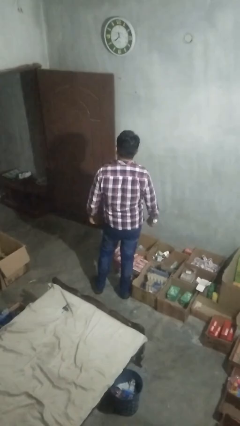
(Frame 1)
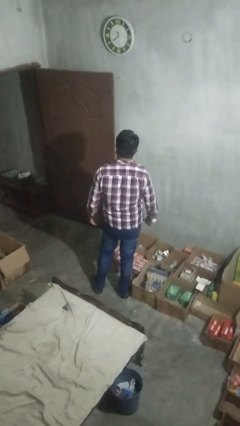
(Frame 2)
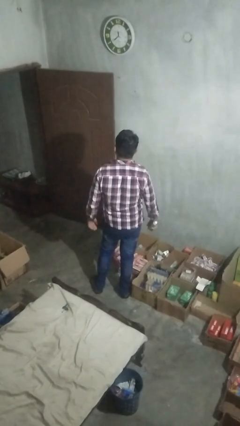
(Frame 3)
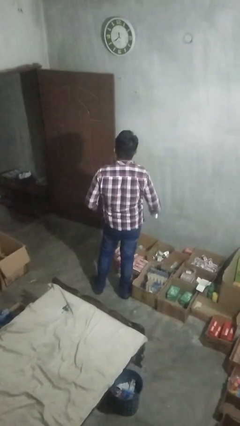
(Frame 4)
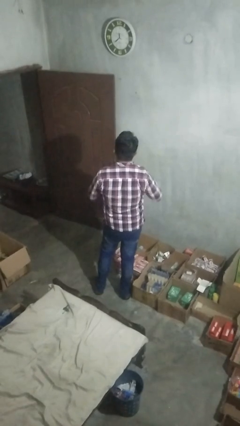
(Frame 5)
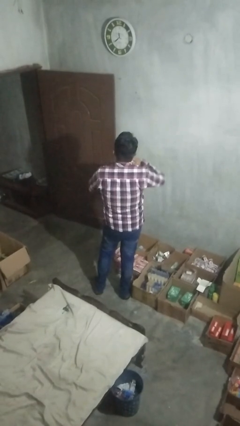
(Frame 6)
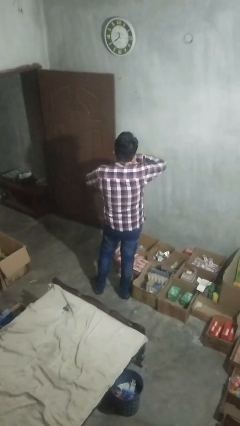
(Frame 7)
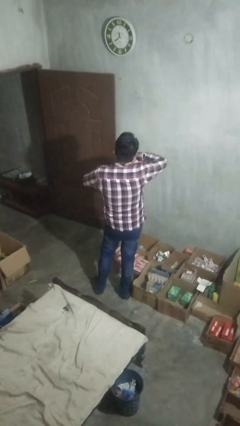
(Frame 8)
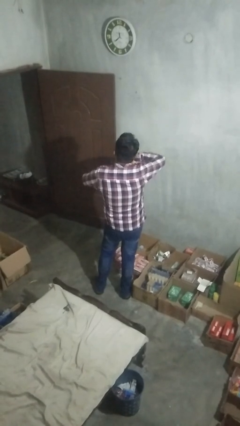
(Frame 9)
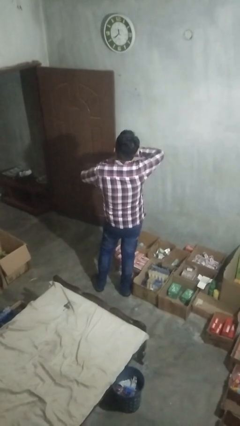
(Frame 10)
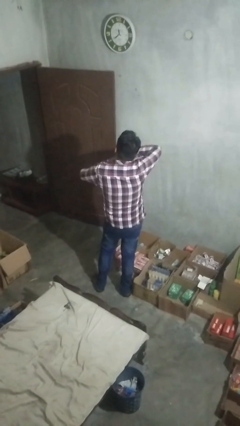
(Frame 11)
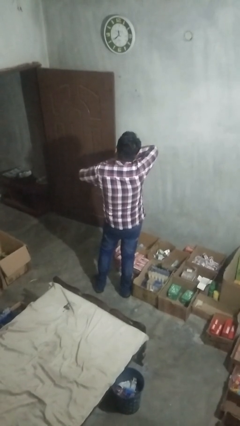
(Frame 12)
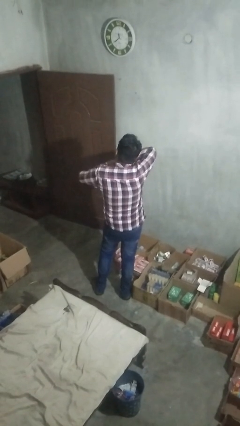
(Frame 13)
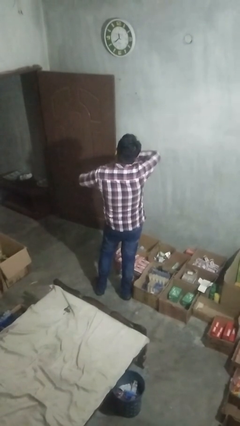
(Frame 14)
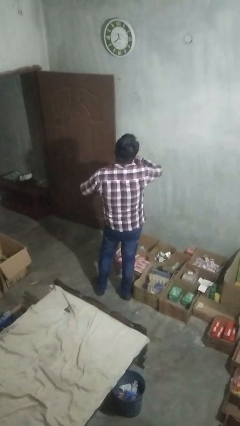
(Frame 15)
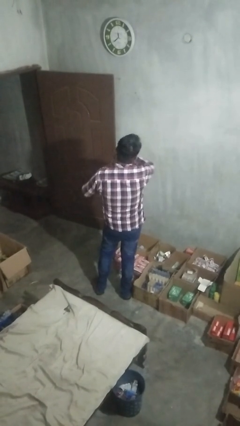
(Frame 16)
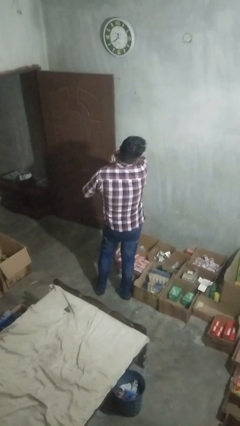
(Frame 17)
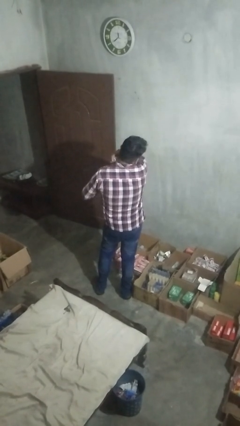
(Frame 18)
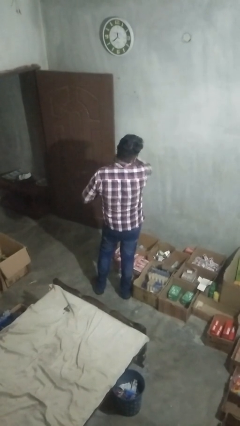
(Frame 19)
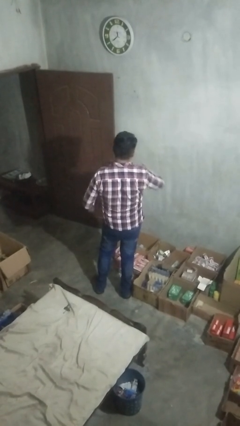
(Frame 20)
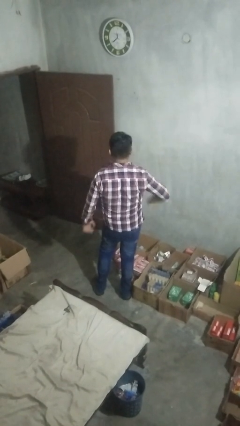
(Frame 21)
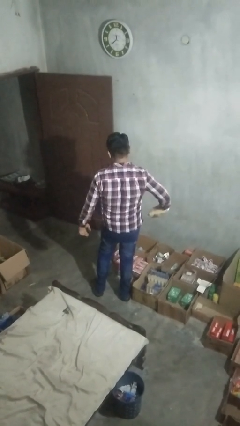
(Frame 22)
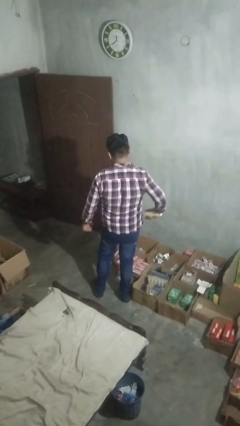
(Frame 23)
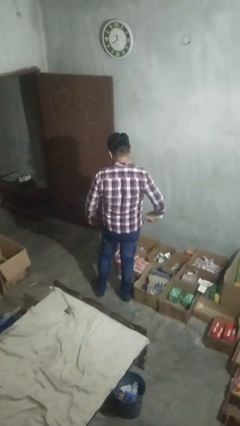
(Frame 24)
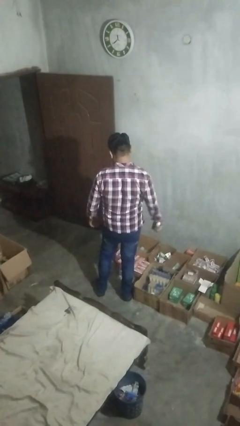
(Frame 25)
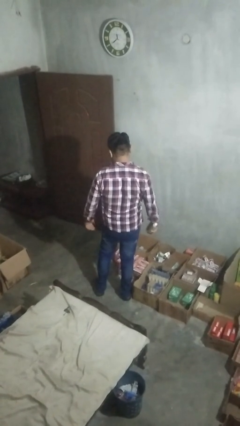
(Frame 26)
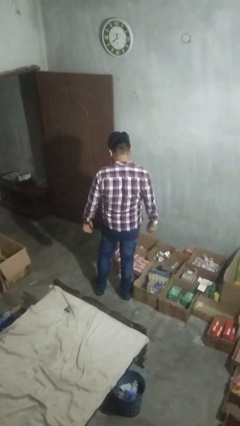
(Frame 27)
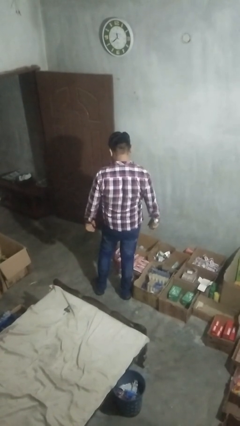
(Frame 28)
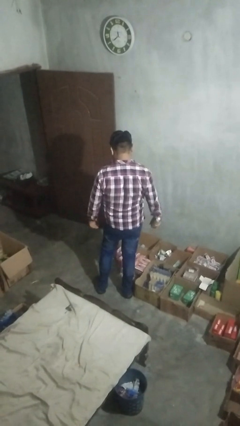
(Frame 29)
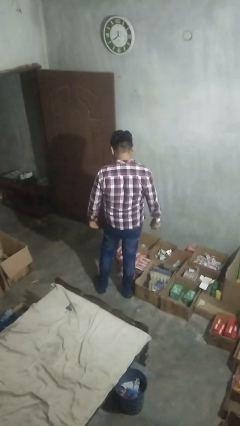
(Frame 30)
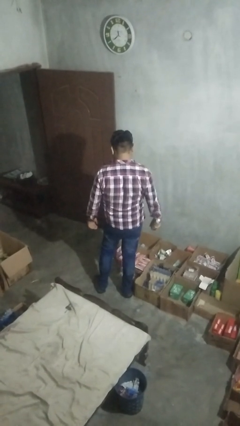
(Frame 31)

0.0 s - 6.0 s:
person applies deodorant

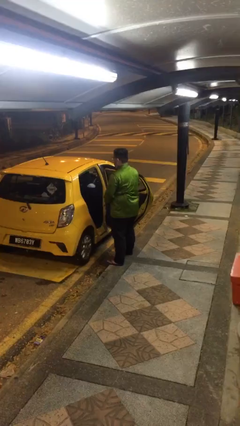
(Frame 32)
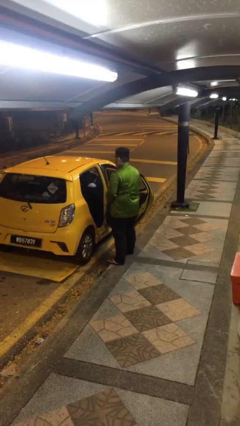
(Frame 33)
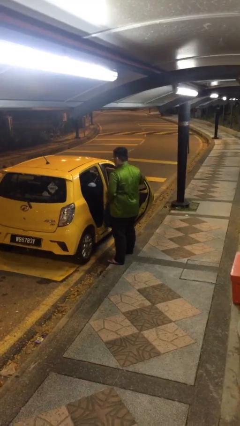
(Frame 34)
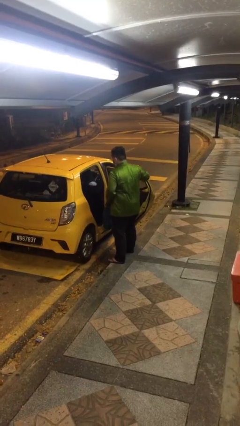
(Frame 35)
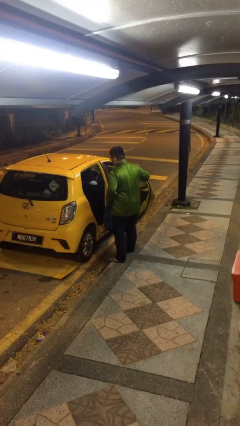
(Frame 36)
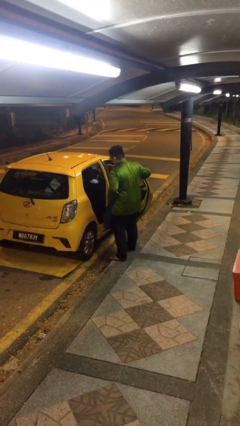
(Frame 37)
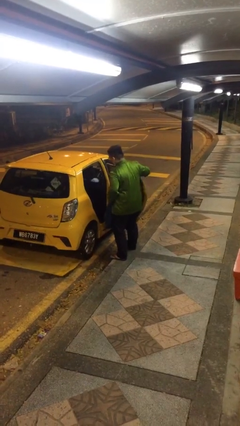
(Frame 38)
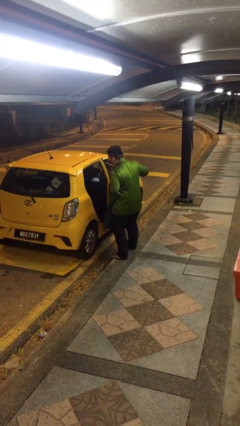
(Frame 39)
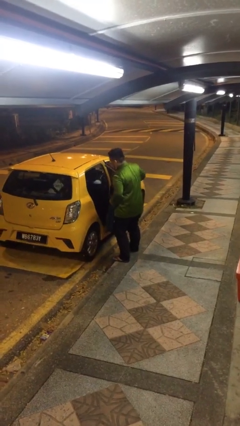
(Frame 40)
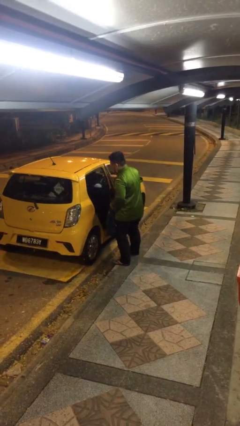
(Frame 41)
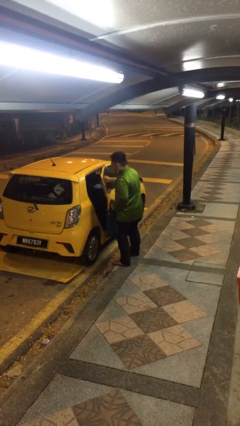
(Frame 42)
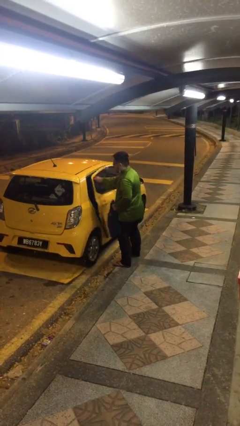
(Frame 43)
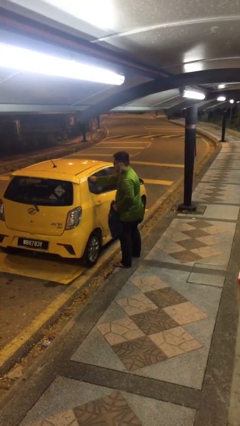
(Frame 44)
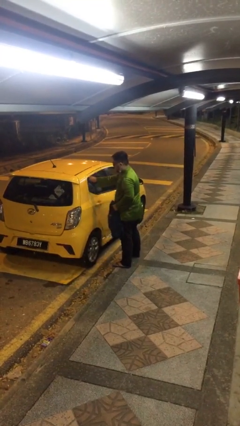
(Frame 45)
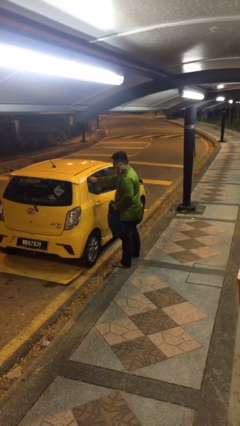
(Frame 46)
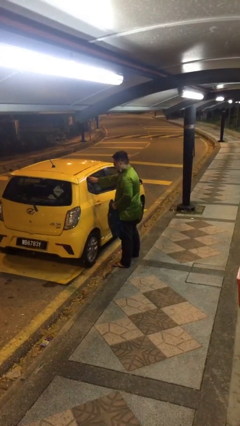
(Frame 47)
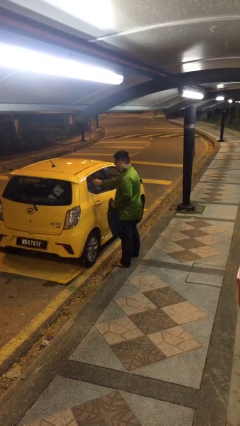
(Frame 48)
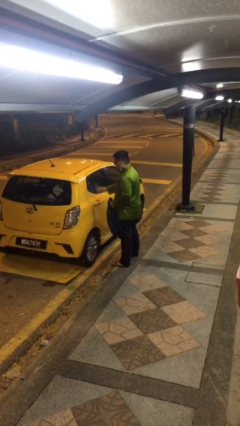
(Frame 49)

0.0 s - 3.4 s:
person closes car door

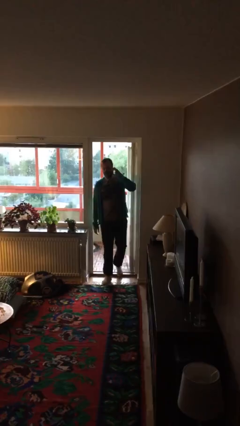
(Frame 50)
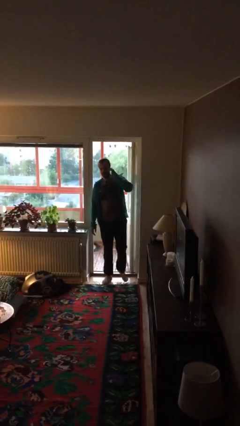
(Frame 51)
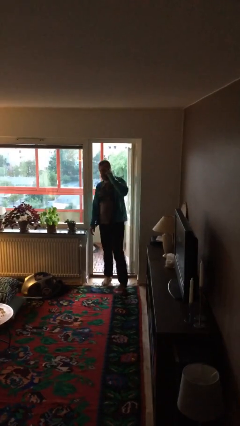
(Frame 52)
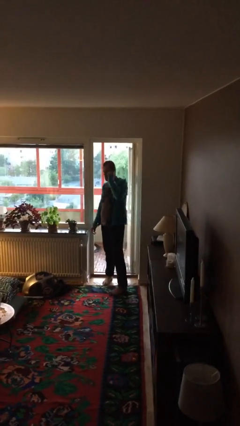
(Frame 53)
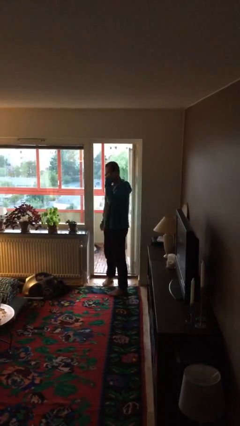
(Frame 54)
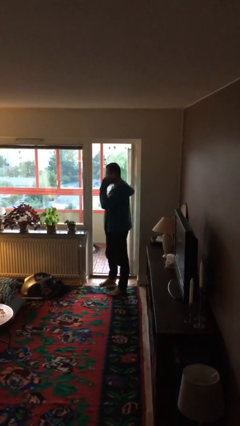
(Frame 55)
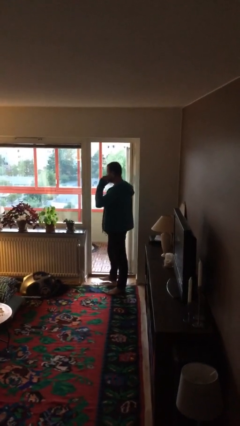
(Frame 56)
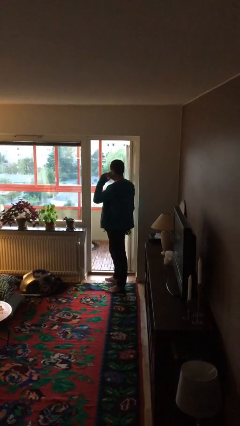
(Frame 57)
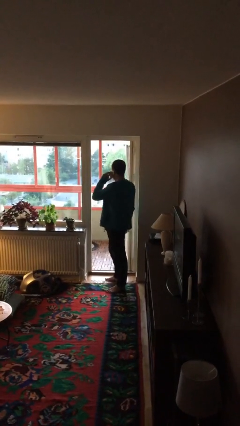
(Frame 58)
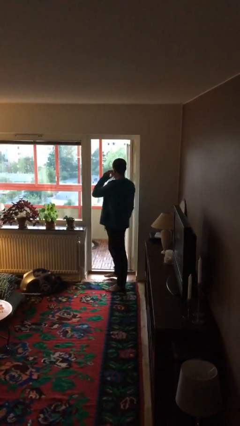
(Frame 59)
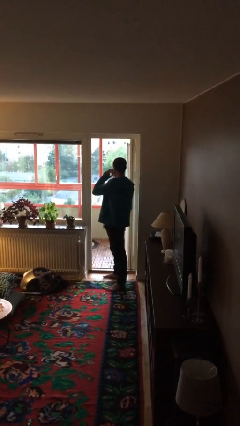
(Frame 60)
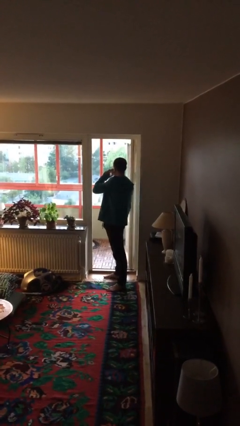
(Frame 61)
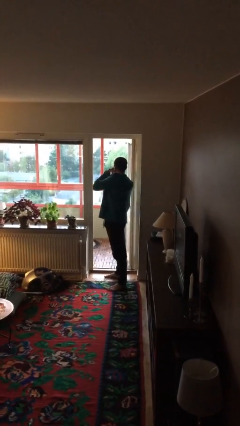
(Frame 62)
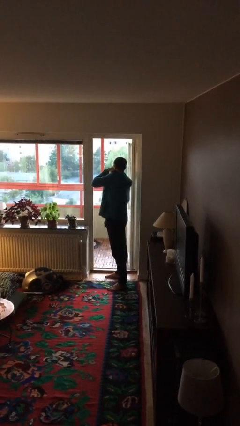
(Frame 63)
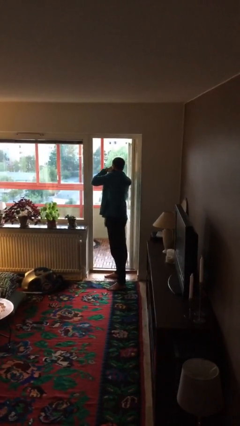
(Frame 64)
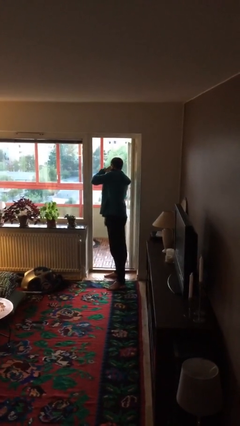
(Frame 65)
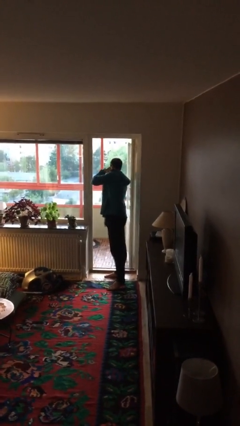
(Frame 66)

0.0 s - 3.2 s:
person enters scene through structure

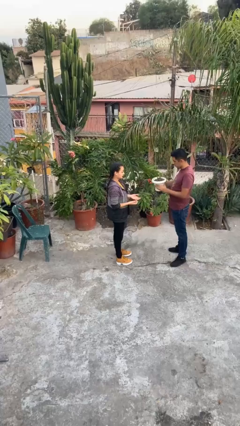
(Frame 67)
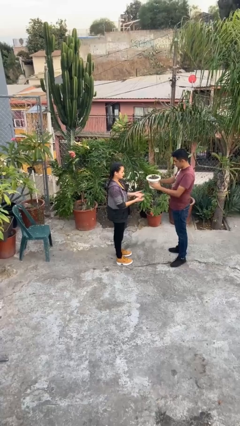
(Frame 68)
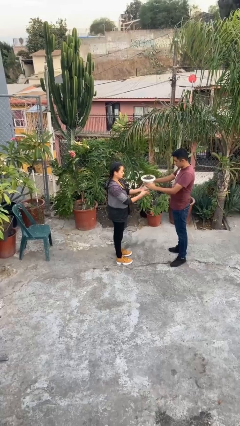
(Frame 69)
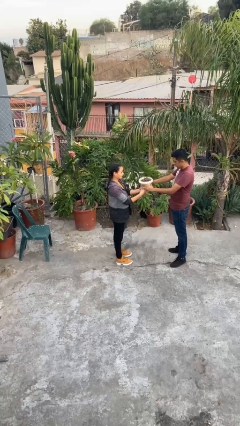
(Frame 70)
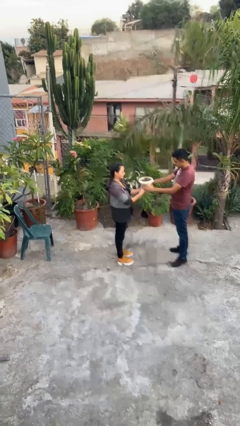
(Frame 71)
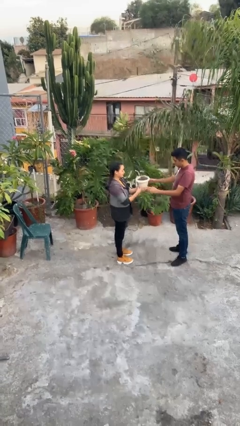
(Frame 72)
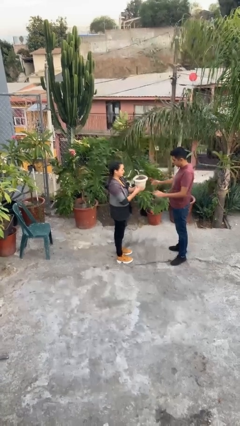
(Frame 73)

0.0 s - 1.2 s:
person transfers object to person

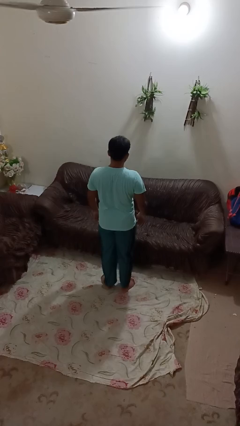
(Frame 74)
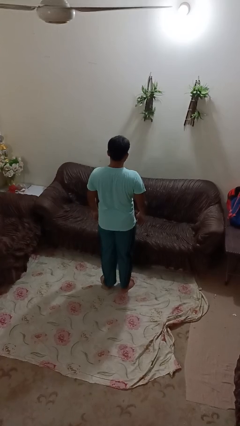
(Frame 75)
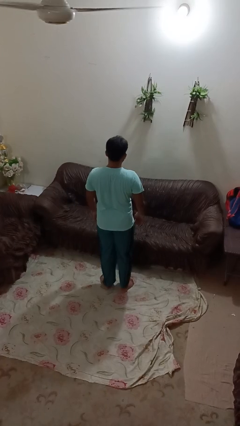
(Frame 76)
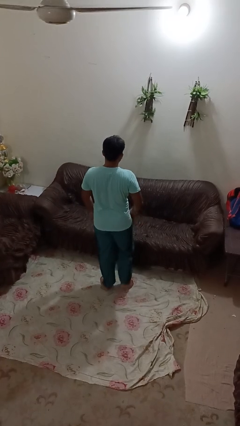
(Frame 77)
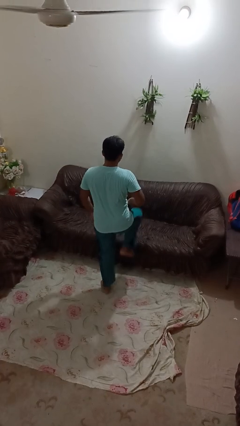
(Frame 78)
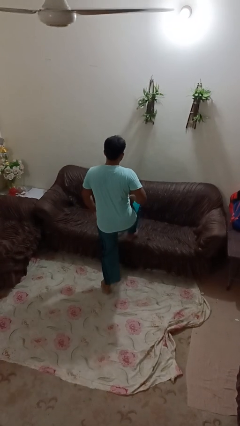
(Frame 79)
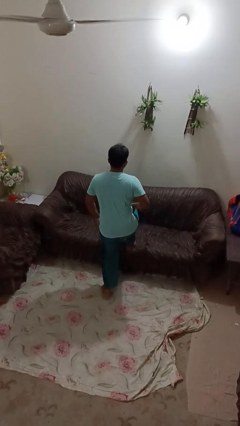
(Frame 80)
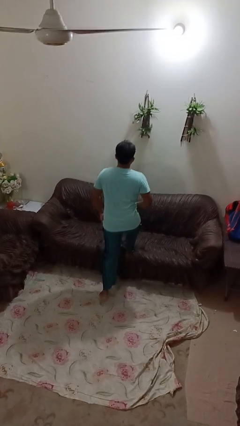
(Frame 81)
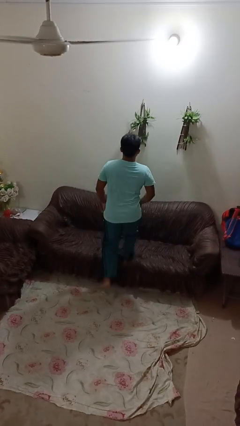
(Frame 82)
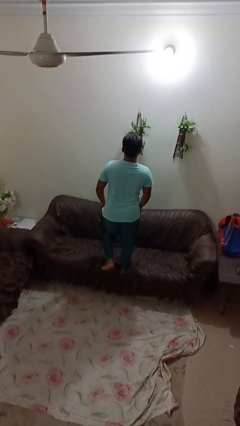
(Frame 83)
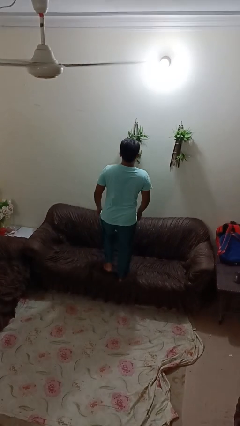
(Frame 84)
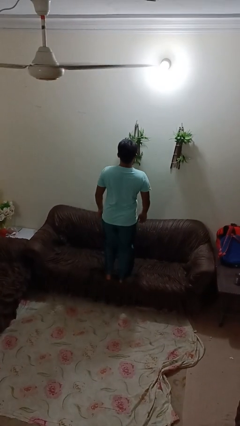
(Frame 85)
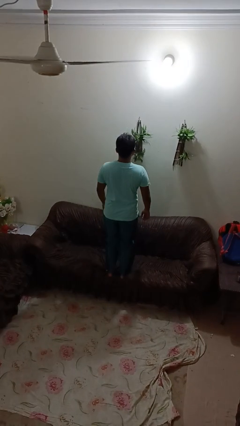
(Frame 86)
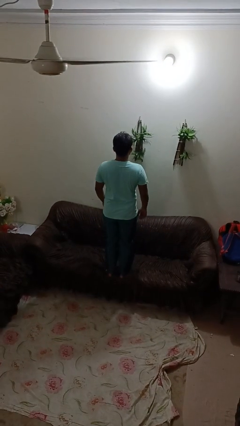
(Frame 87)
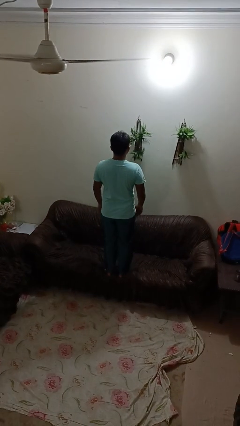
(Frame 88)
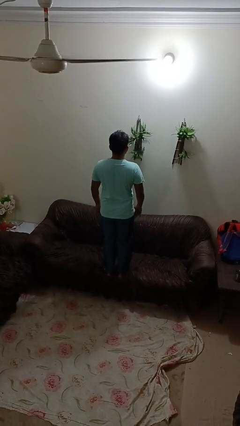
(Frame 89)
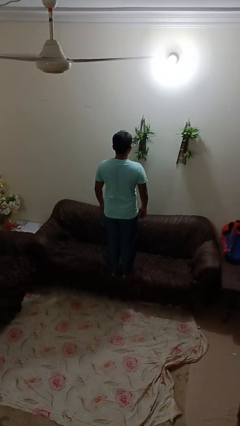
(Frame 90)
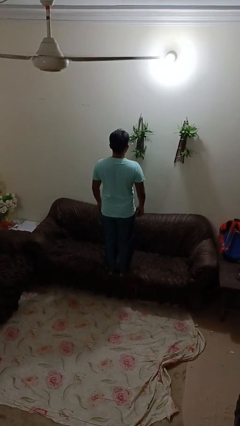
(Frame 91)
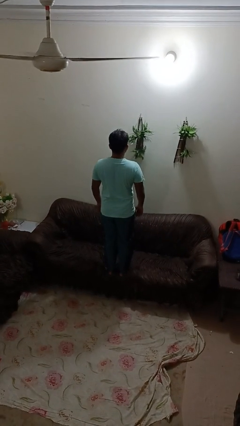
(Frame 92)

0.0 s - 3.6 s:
person climbs on couch

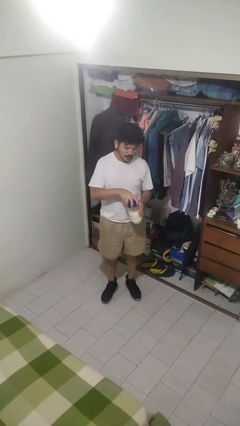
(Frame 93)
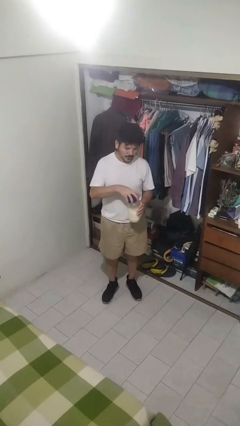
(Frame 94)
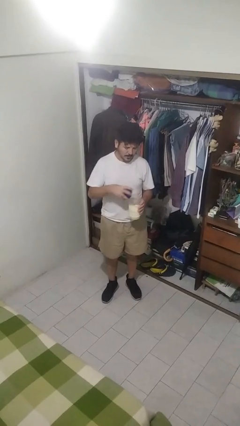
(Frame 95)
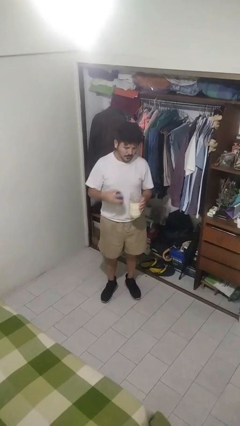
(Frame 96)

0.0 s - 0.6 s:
person opens jar
